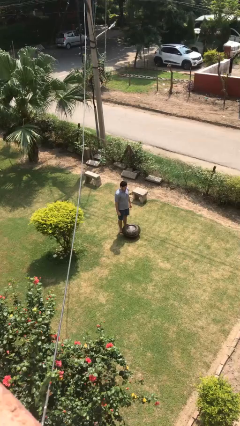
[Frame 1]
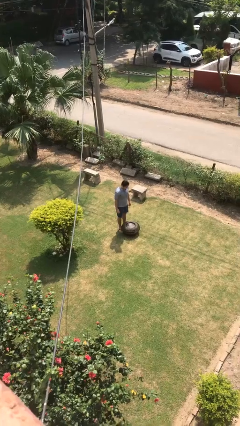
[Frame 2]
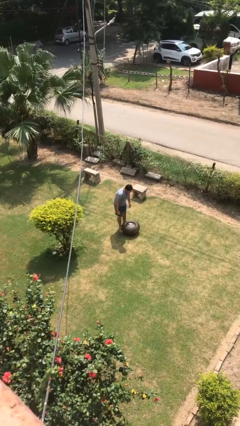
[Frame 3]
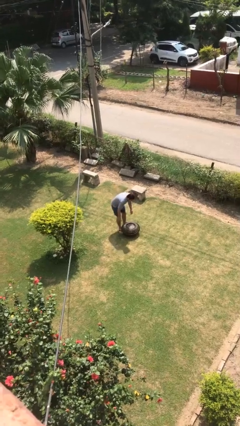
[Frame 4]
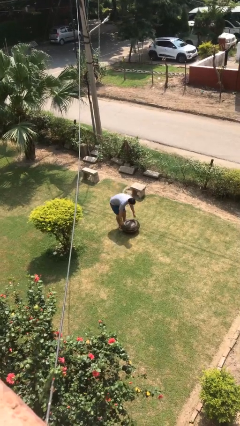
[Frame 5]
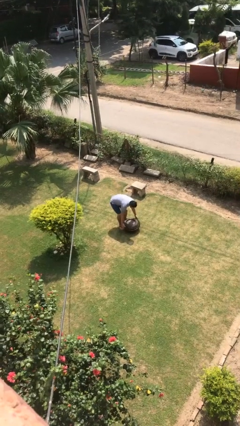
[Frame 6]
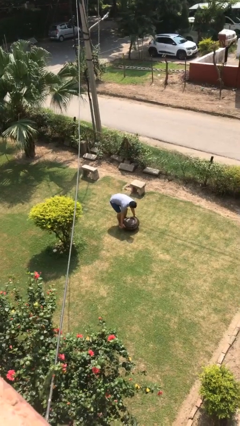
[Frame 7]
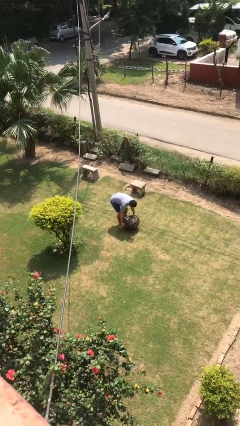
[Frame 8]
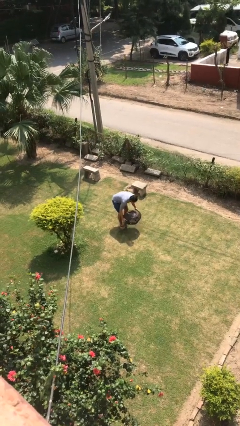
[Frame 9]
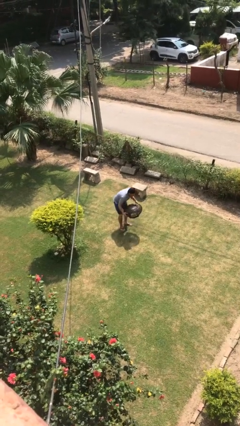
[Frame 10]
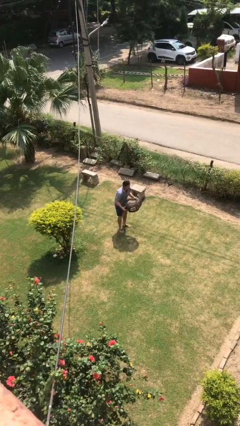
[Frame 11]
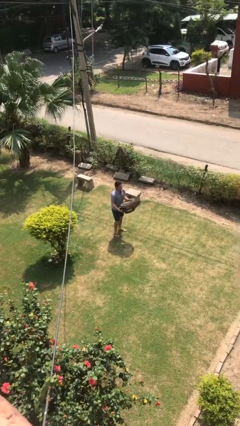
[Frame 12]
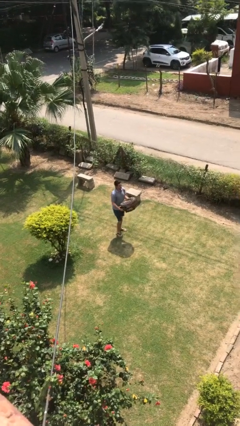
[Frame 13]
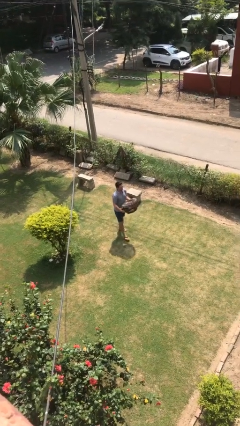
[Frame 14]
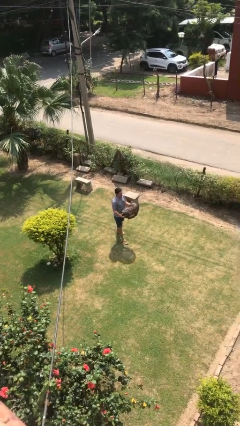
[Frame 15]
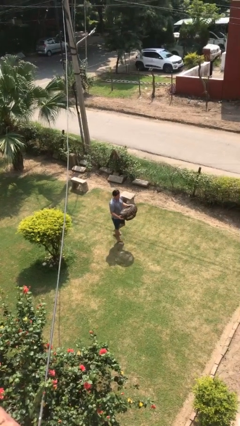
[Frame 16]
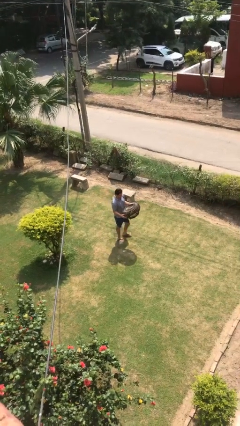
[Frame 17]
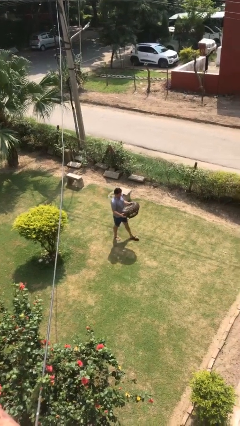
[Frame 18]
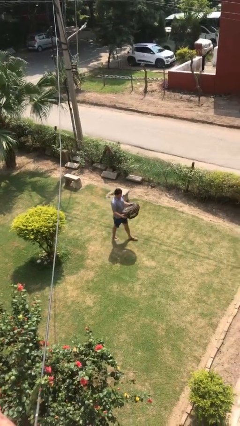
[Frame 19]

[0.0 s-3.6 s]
person picks up object from floor

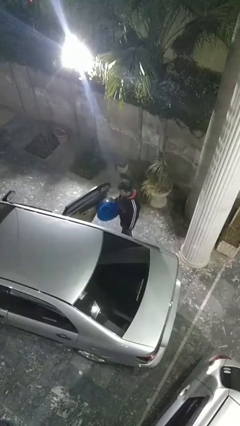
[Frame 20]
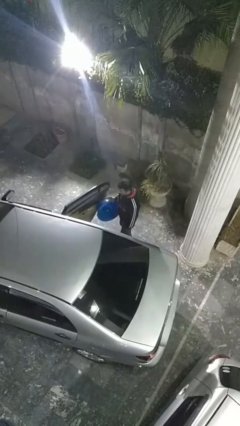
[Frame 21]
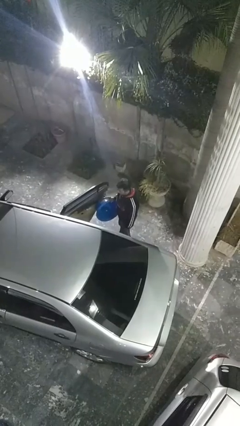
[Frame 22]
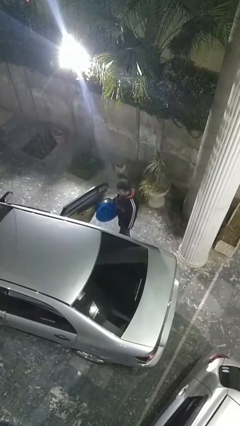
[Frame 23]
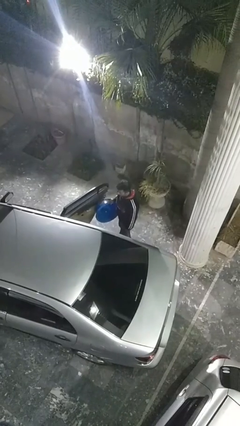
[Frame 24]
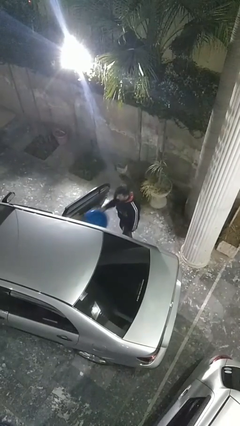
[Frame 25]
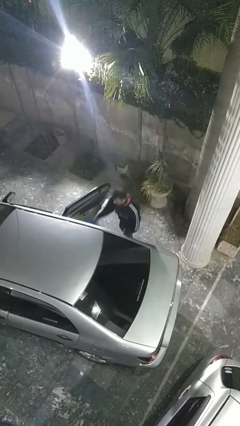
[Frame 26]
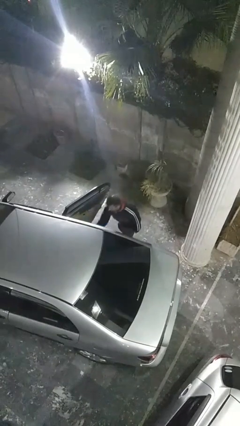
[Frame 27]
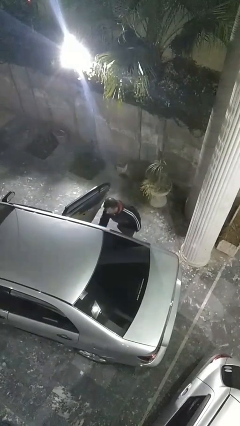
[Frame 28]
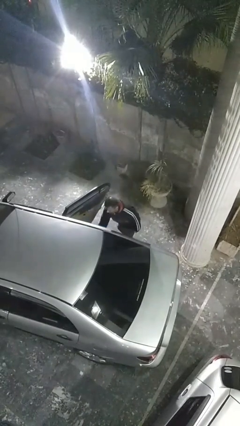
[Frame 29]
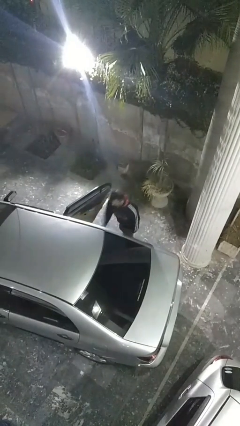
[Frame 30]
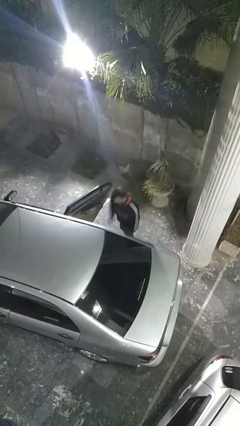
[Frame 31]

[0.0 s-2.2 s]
person loads car

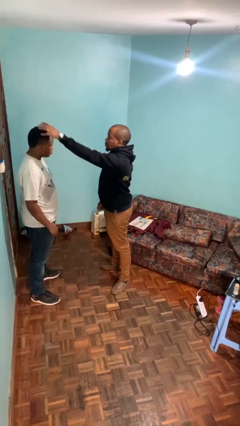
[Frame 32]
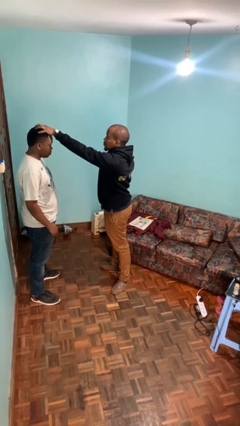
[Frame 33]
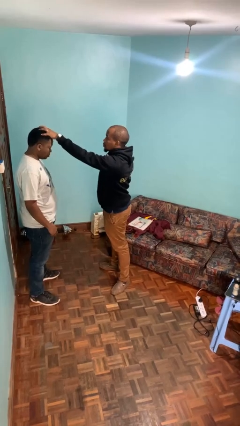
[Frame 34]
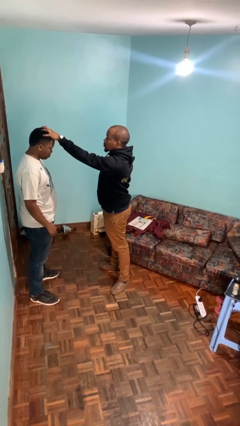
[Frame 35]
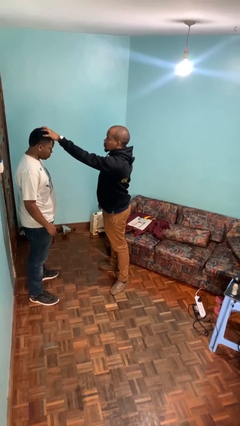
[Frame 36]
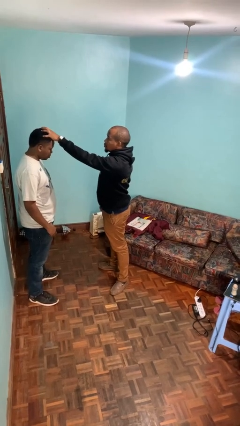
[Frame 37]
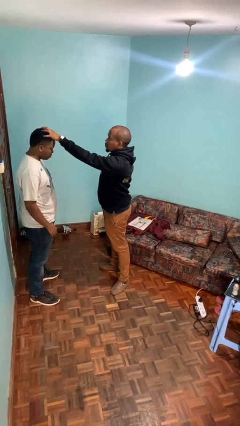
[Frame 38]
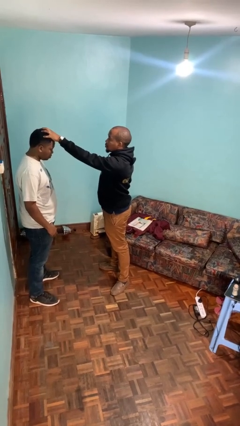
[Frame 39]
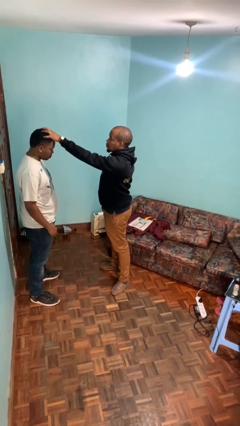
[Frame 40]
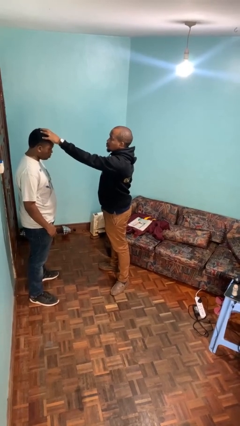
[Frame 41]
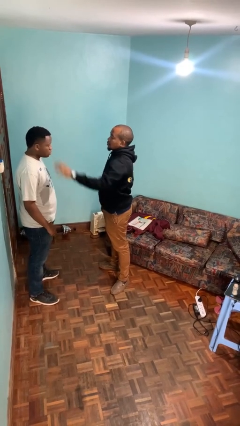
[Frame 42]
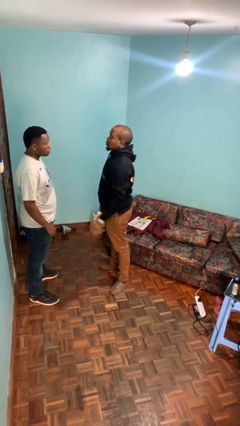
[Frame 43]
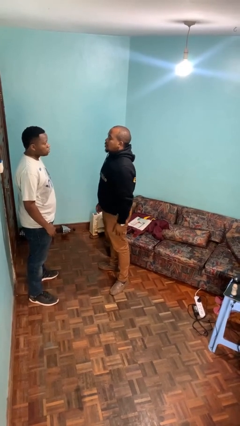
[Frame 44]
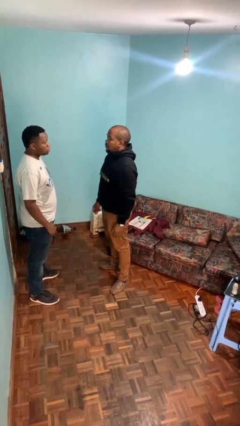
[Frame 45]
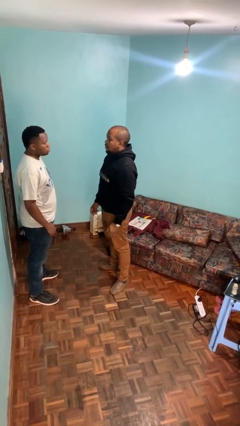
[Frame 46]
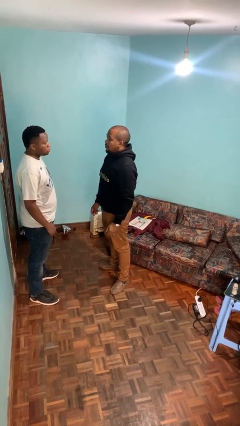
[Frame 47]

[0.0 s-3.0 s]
person grabs person by hair

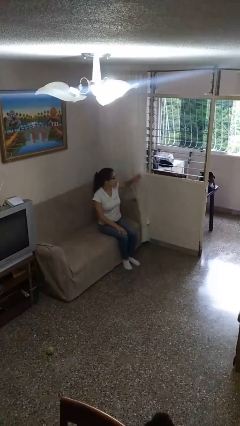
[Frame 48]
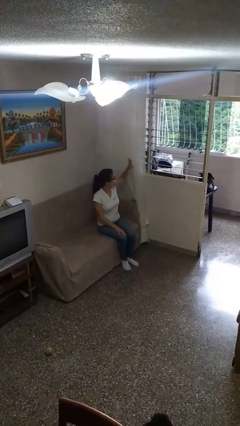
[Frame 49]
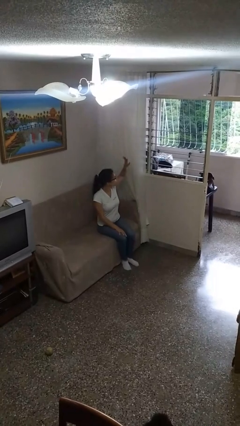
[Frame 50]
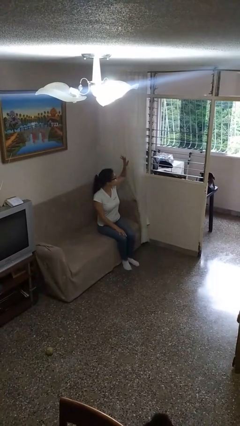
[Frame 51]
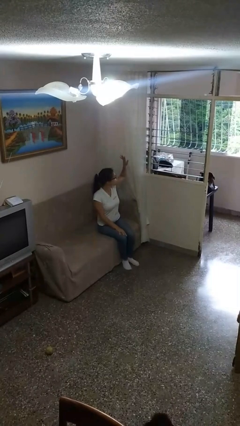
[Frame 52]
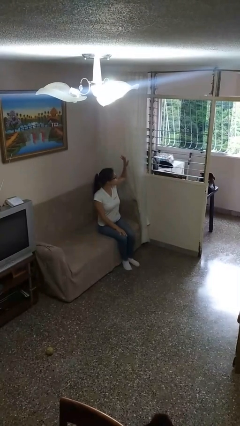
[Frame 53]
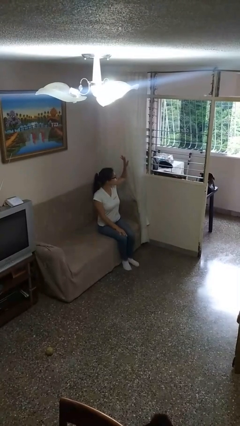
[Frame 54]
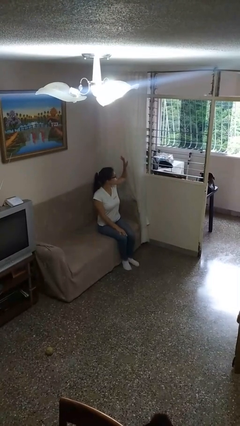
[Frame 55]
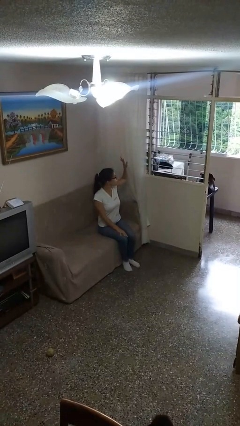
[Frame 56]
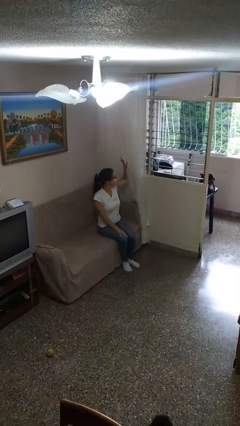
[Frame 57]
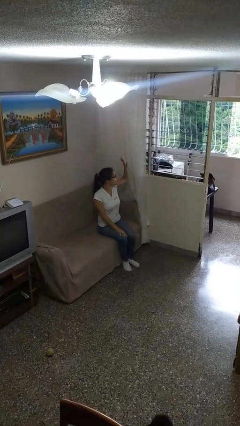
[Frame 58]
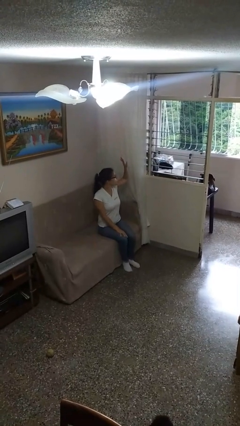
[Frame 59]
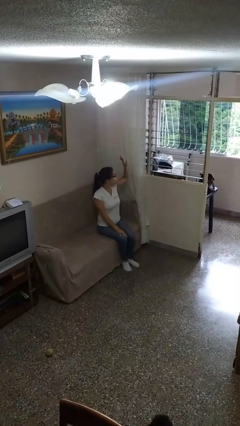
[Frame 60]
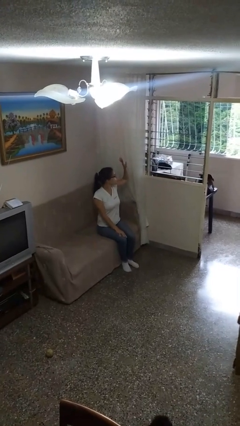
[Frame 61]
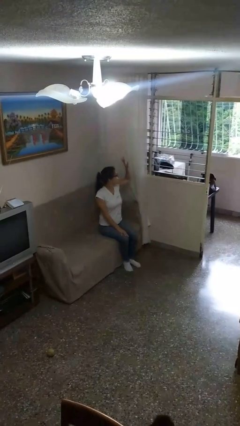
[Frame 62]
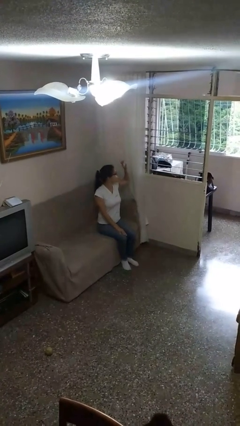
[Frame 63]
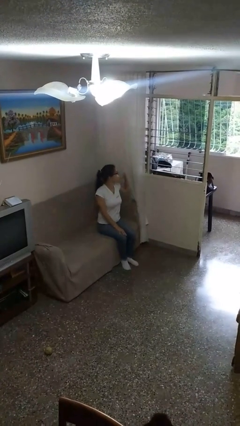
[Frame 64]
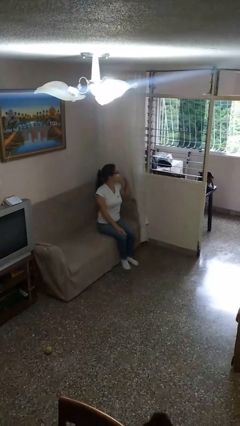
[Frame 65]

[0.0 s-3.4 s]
person gestures raise hand

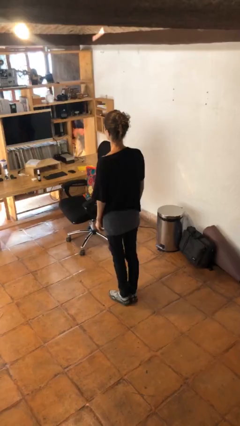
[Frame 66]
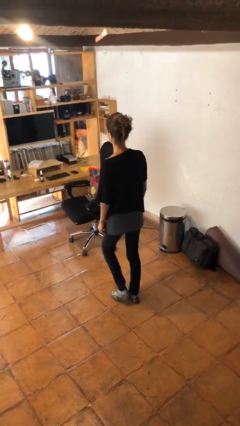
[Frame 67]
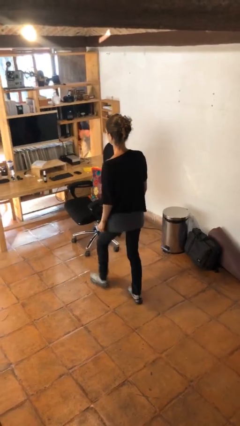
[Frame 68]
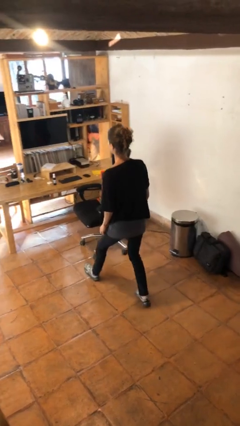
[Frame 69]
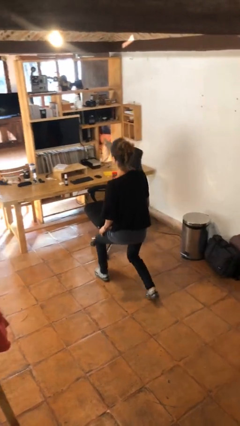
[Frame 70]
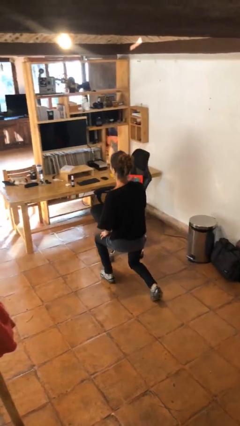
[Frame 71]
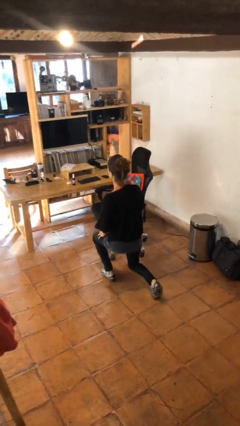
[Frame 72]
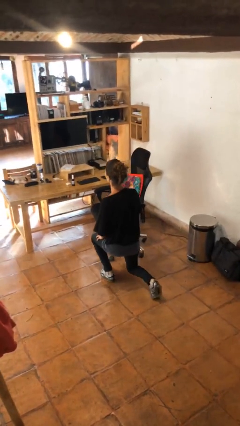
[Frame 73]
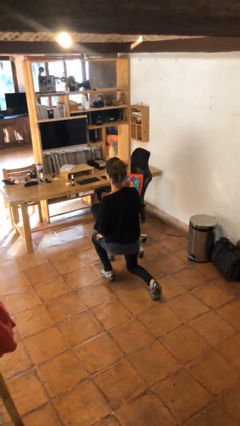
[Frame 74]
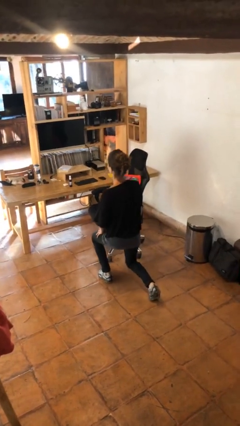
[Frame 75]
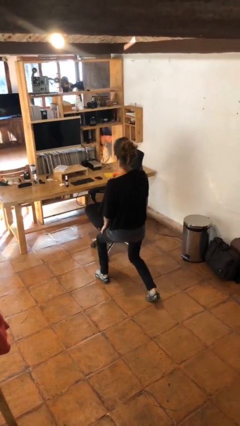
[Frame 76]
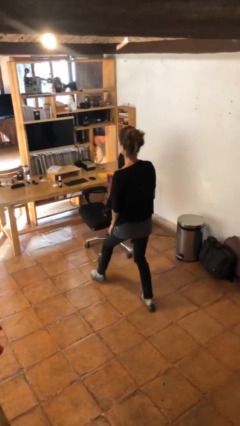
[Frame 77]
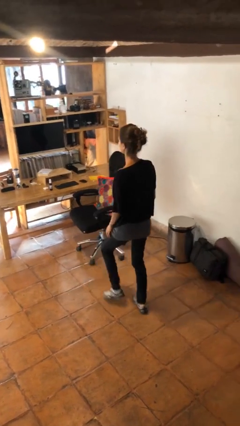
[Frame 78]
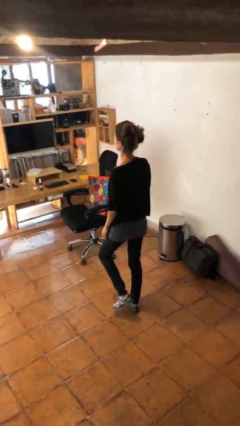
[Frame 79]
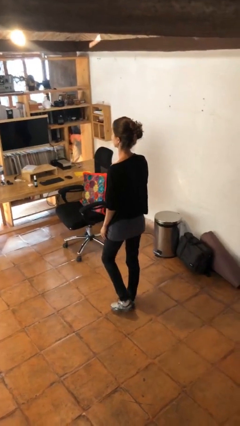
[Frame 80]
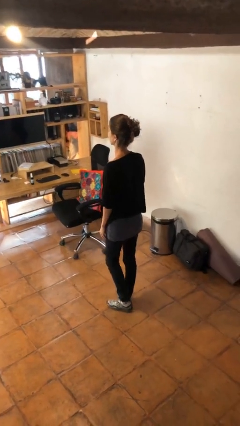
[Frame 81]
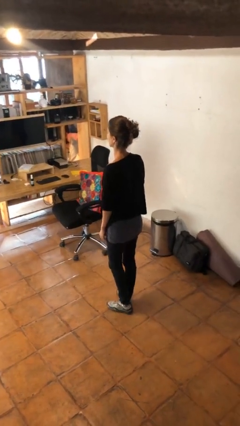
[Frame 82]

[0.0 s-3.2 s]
person exercises with lunges

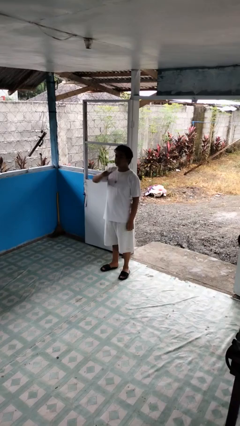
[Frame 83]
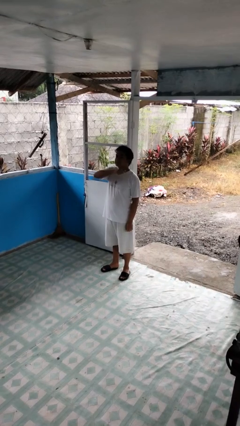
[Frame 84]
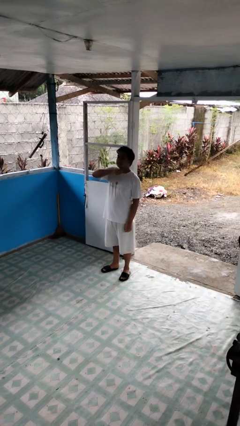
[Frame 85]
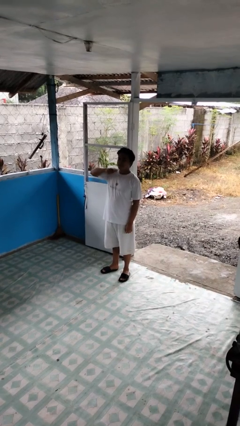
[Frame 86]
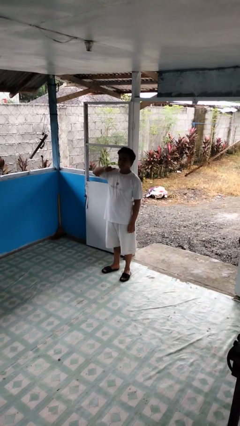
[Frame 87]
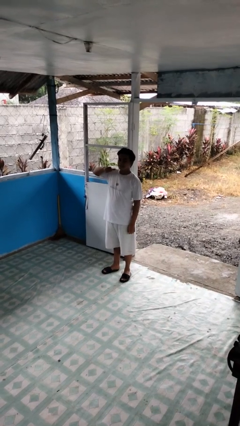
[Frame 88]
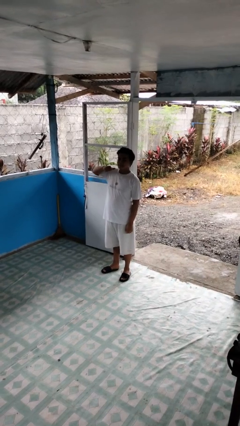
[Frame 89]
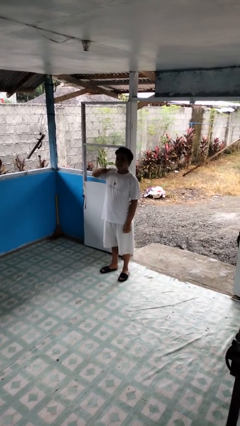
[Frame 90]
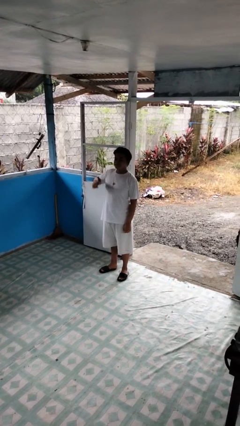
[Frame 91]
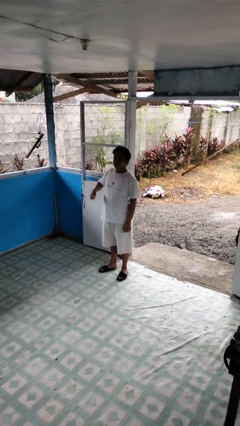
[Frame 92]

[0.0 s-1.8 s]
person gestures cut
